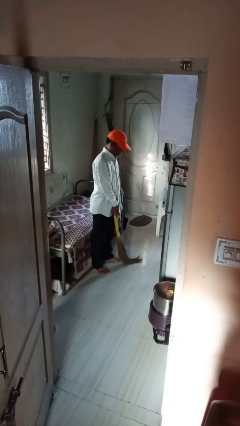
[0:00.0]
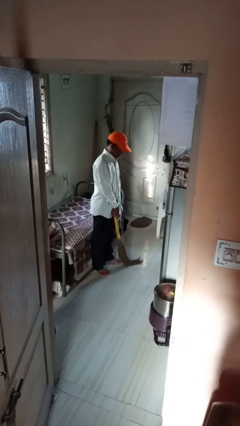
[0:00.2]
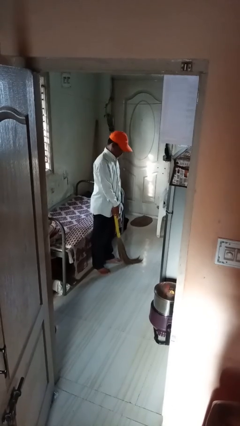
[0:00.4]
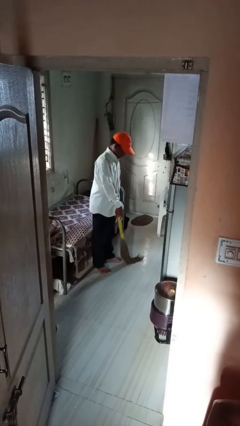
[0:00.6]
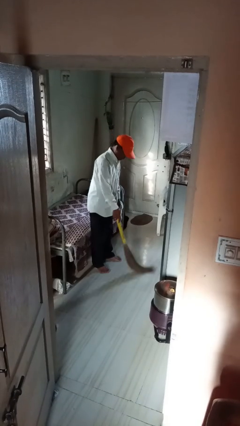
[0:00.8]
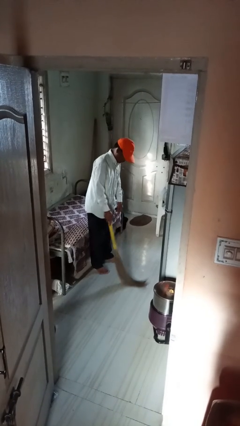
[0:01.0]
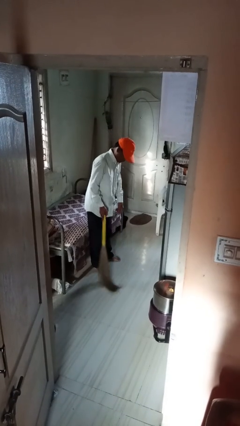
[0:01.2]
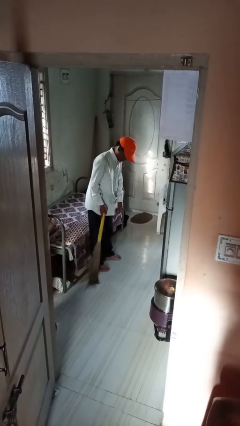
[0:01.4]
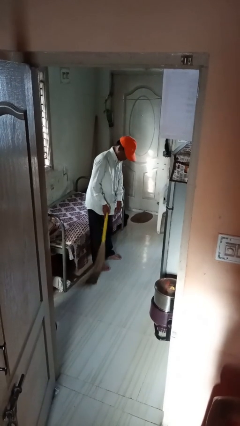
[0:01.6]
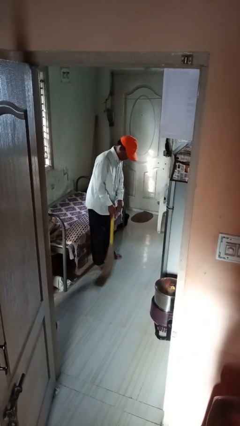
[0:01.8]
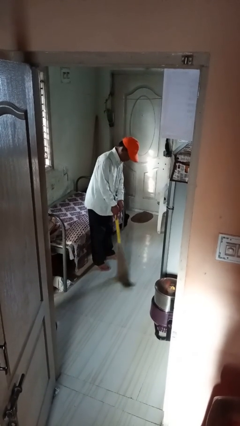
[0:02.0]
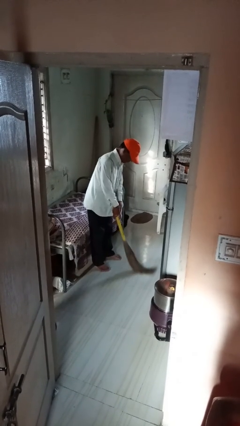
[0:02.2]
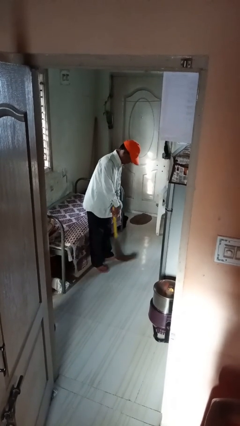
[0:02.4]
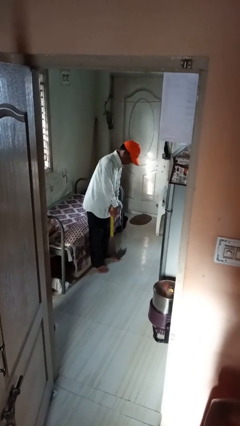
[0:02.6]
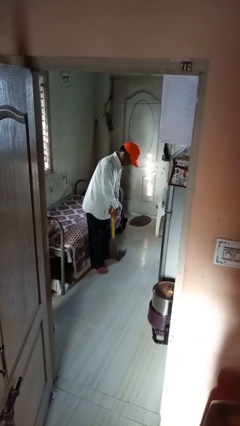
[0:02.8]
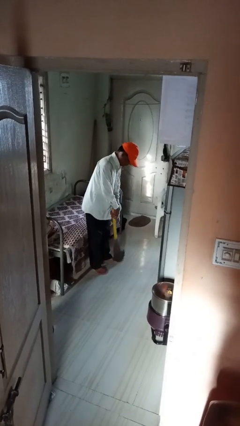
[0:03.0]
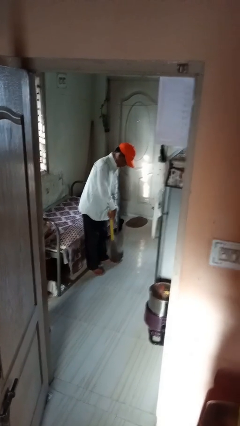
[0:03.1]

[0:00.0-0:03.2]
person sweeps floor

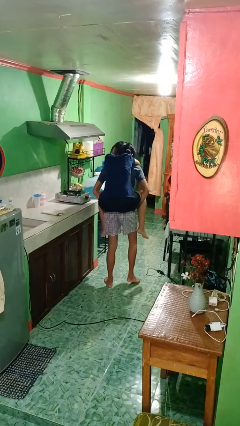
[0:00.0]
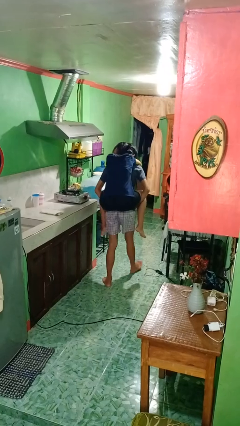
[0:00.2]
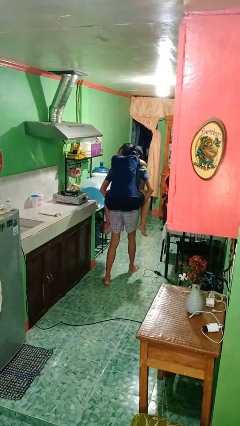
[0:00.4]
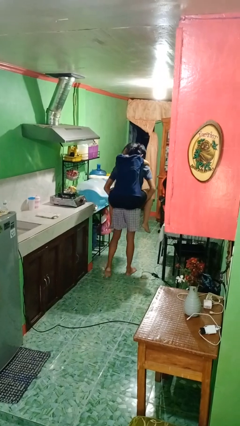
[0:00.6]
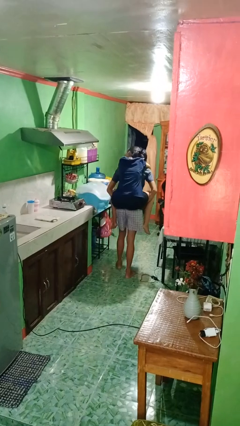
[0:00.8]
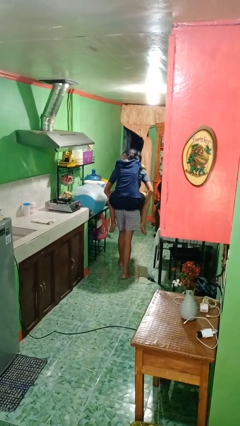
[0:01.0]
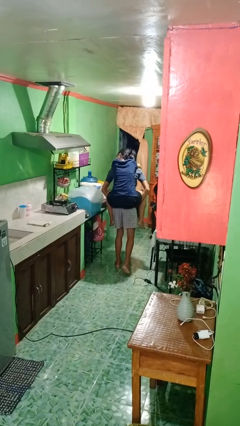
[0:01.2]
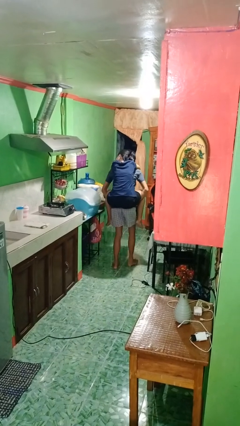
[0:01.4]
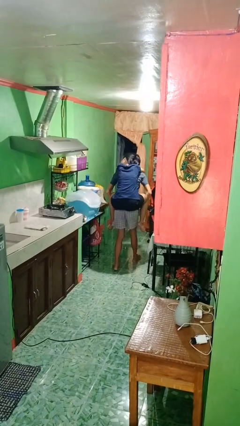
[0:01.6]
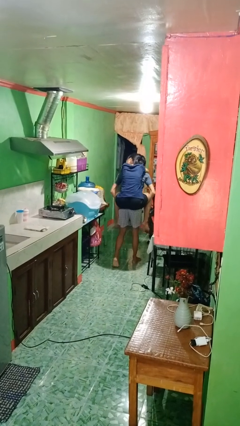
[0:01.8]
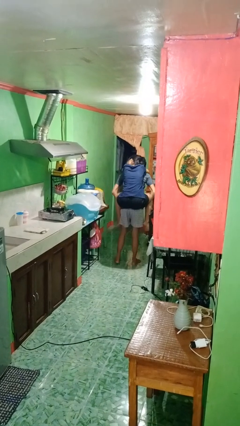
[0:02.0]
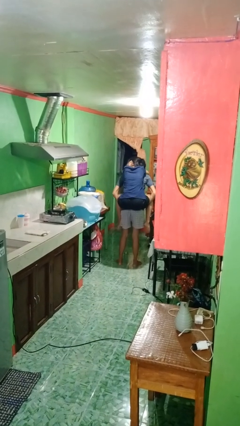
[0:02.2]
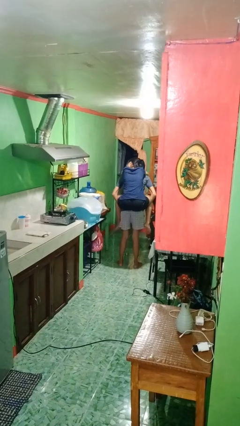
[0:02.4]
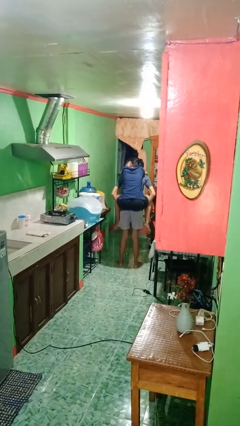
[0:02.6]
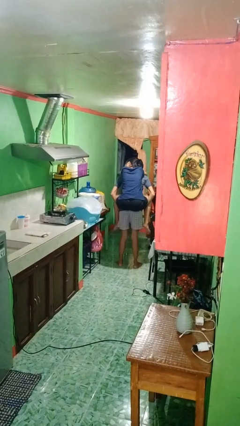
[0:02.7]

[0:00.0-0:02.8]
person carries person on back

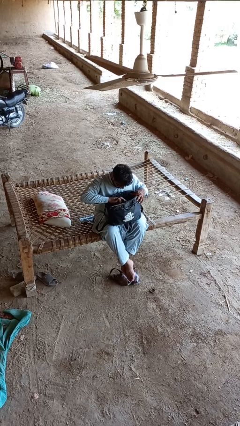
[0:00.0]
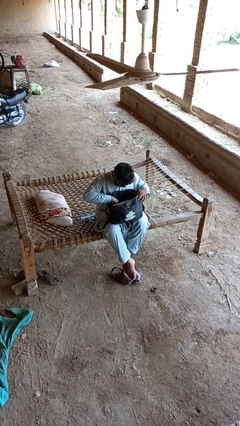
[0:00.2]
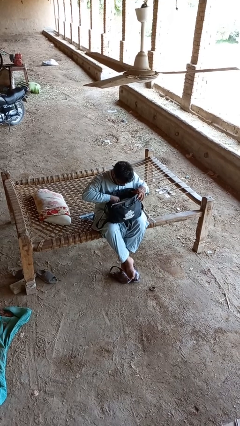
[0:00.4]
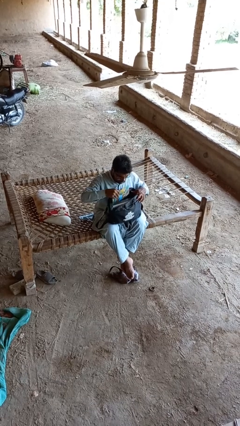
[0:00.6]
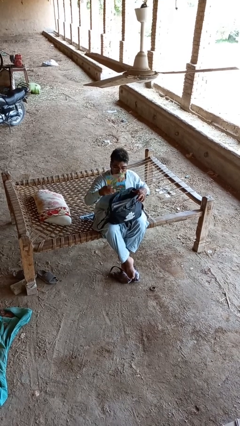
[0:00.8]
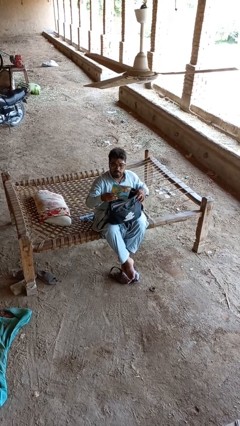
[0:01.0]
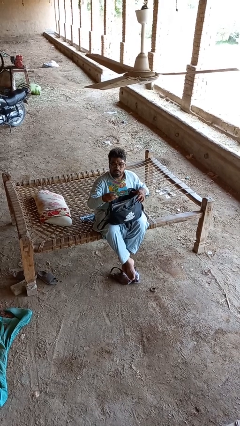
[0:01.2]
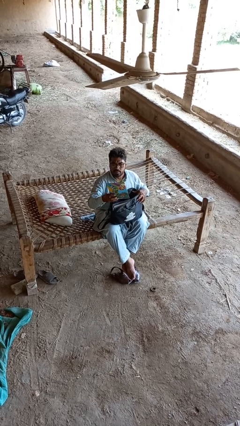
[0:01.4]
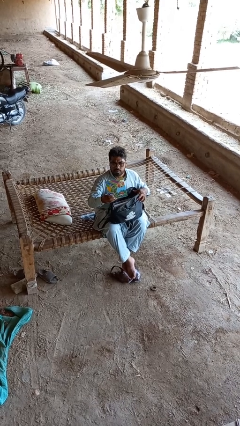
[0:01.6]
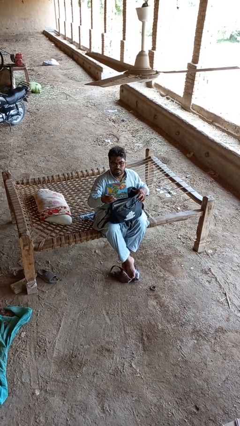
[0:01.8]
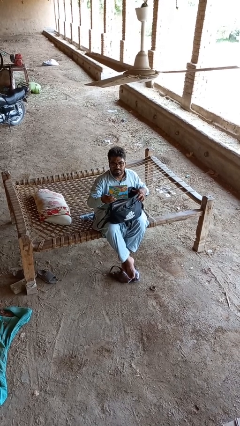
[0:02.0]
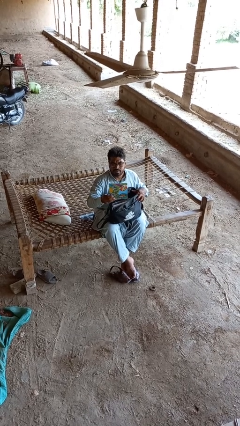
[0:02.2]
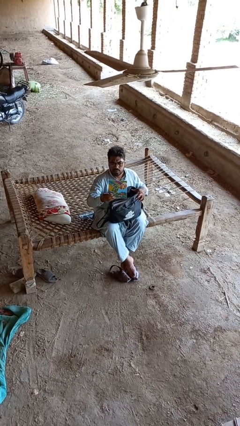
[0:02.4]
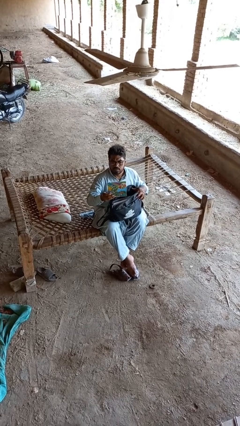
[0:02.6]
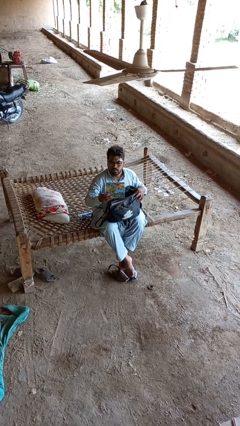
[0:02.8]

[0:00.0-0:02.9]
person takes object from backpack

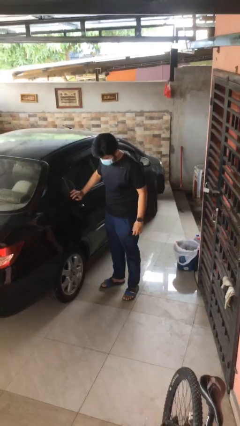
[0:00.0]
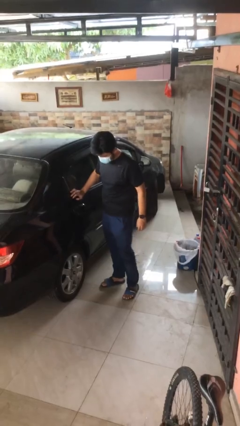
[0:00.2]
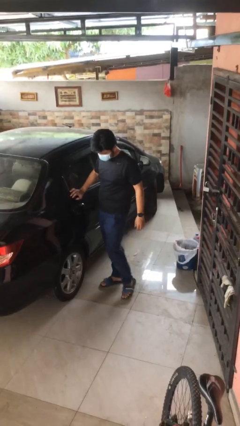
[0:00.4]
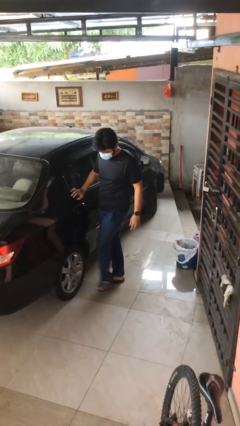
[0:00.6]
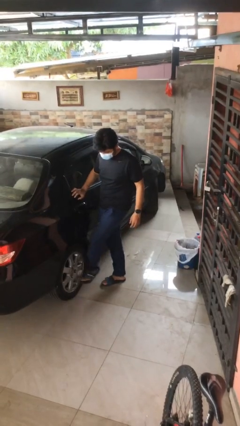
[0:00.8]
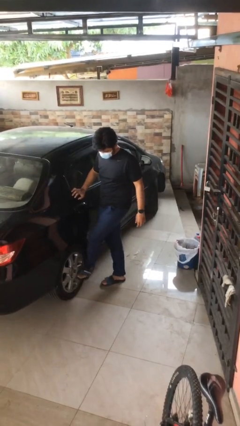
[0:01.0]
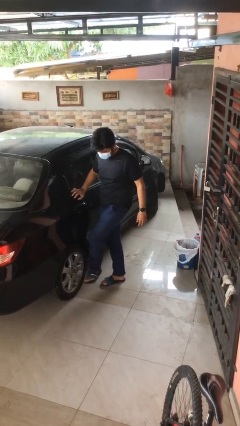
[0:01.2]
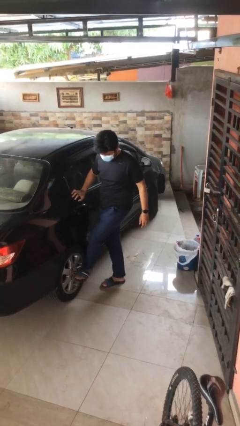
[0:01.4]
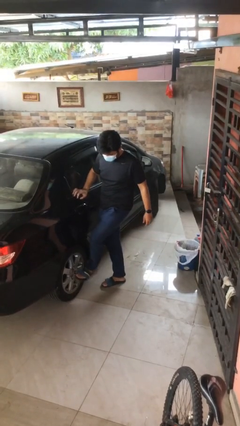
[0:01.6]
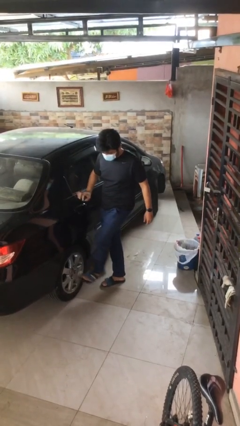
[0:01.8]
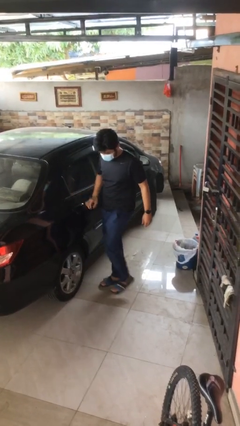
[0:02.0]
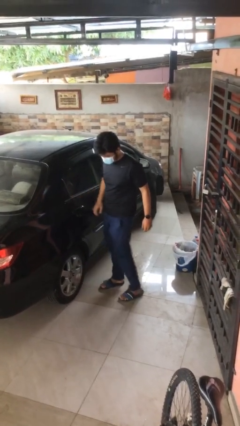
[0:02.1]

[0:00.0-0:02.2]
person kicks car tires

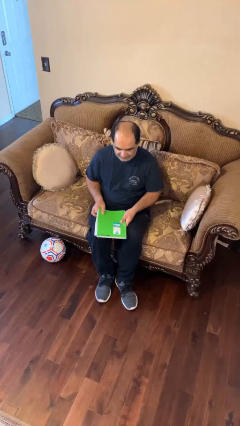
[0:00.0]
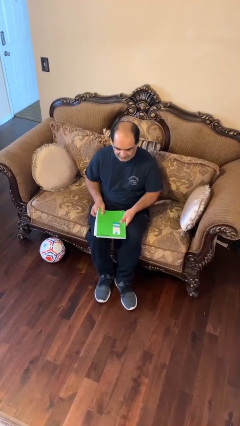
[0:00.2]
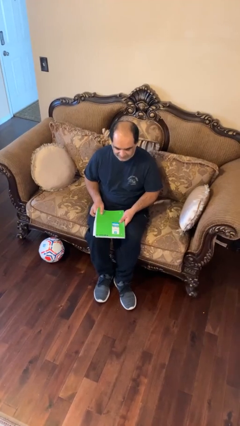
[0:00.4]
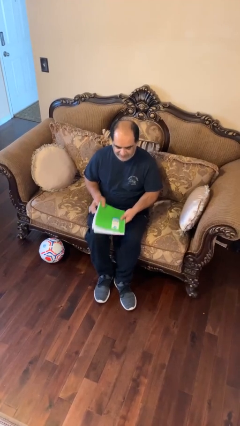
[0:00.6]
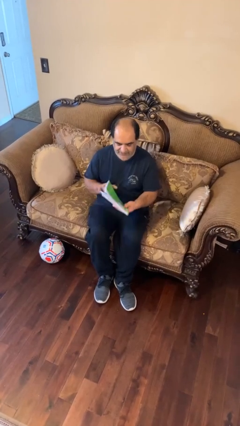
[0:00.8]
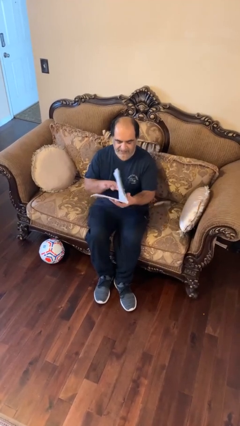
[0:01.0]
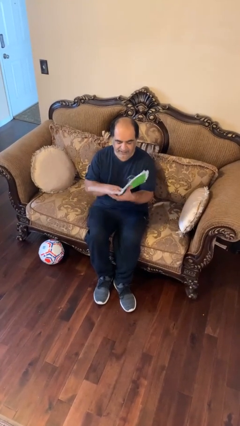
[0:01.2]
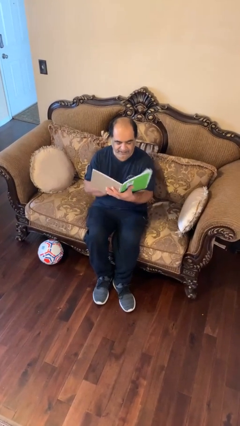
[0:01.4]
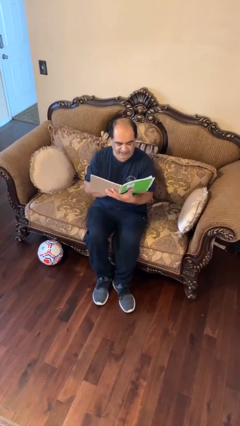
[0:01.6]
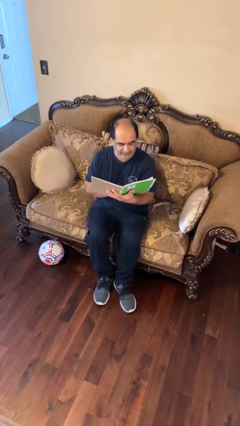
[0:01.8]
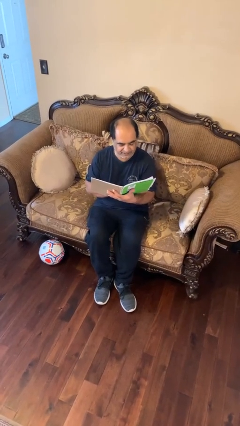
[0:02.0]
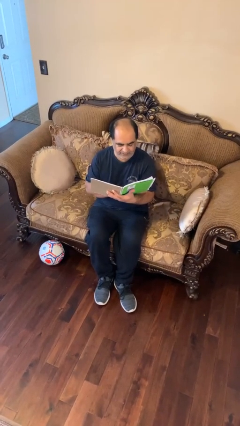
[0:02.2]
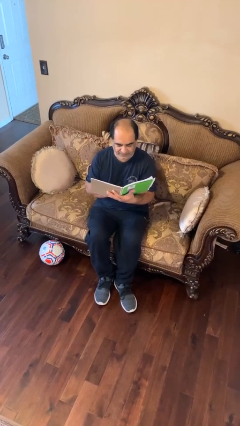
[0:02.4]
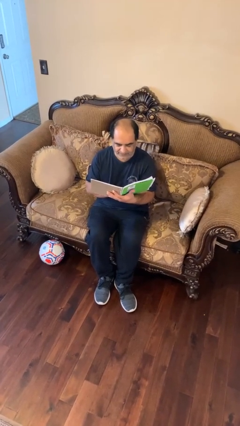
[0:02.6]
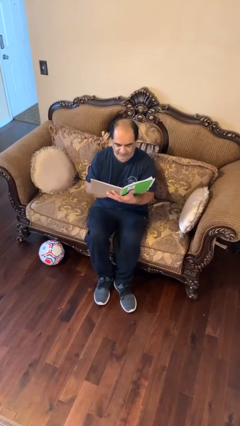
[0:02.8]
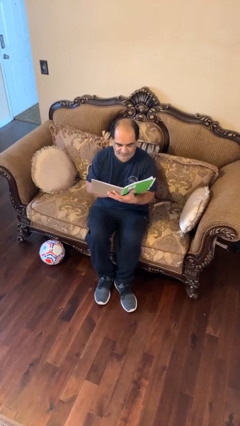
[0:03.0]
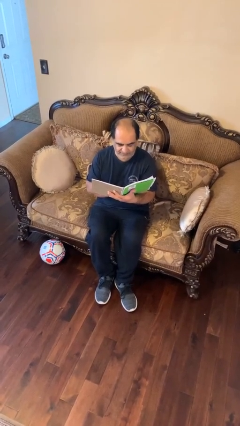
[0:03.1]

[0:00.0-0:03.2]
person reads document

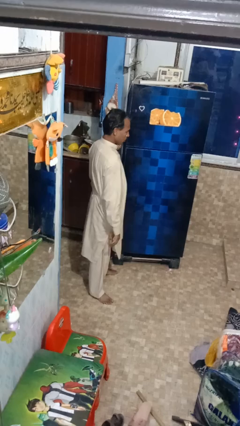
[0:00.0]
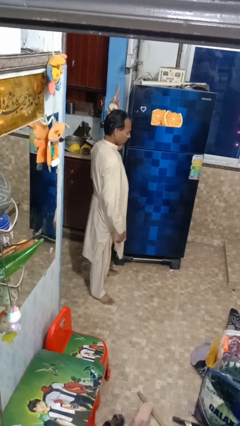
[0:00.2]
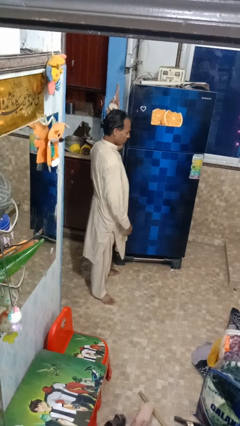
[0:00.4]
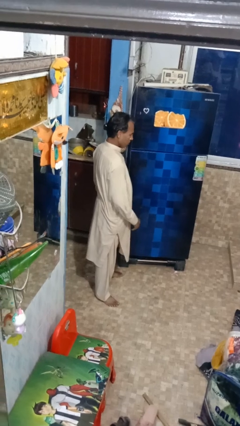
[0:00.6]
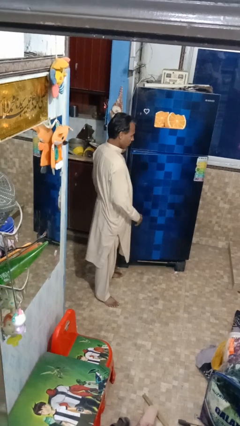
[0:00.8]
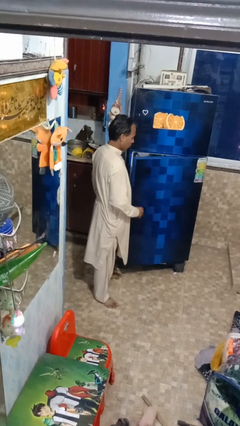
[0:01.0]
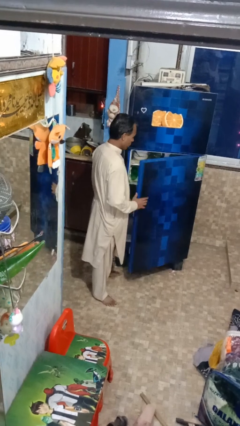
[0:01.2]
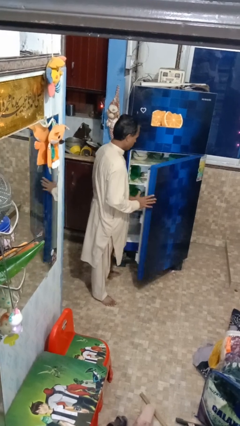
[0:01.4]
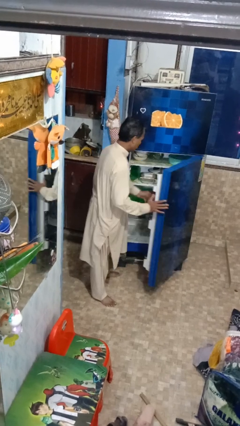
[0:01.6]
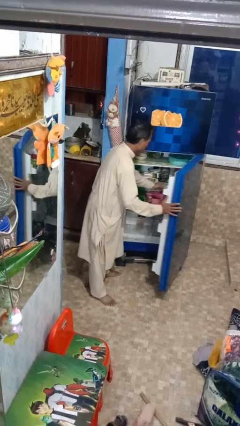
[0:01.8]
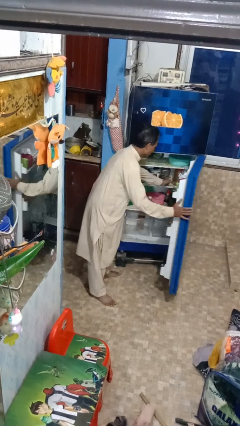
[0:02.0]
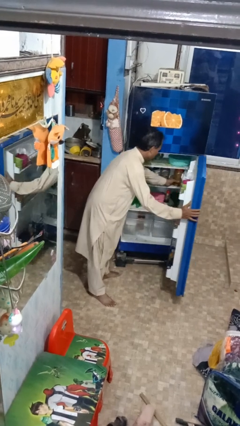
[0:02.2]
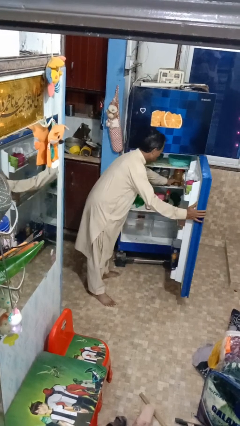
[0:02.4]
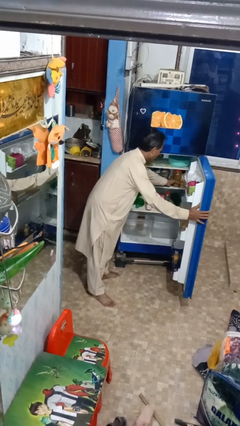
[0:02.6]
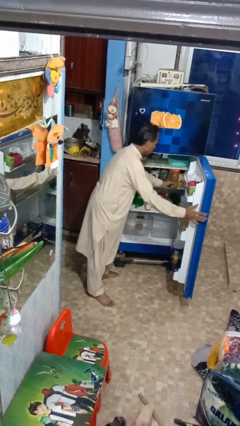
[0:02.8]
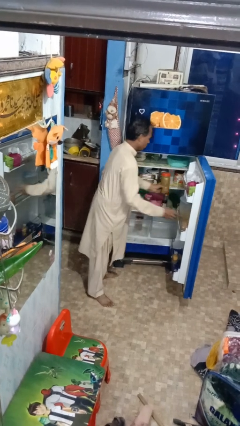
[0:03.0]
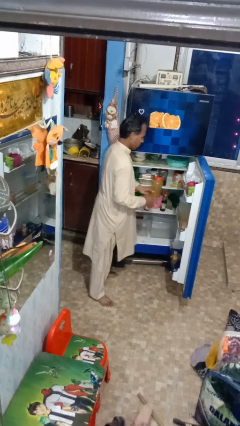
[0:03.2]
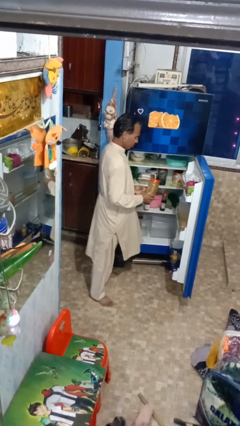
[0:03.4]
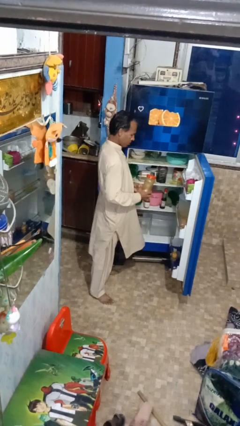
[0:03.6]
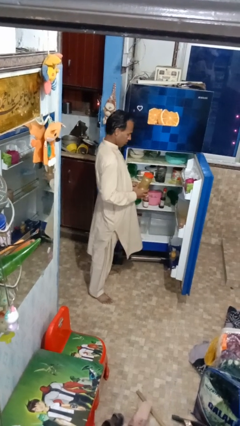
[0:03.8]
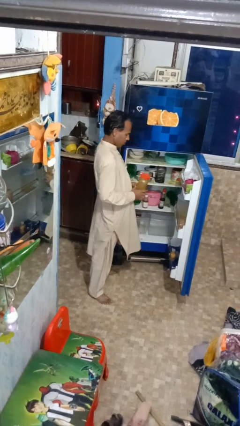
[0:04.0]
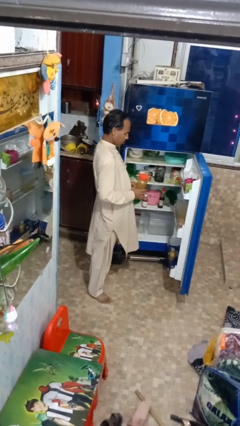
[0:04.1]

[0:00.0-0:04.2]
person puts object into refrigerator
